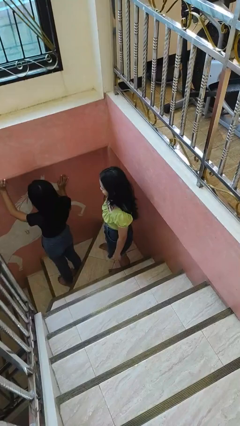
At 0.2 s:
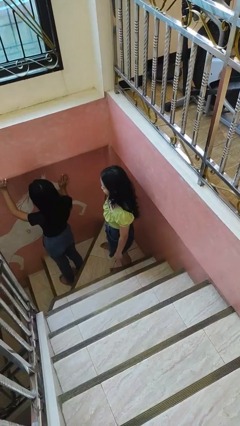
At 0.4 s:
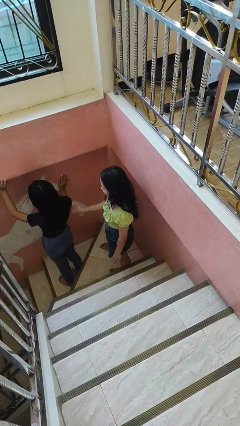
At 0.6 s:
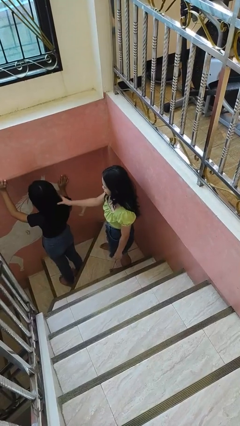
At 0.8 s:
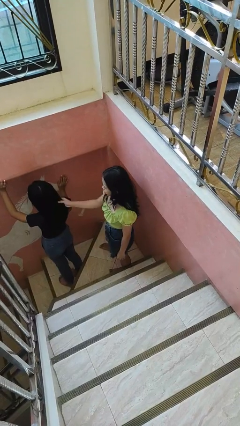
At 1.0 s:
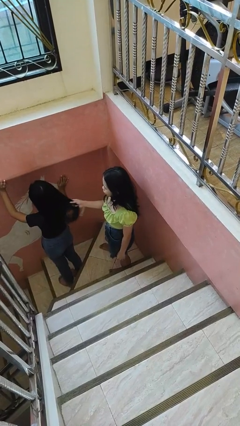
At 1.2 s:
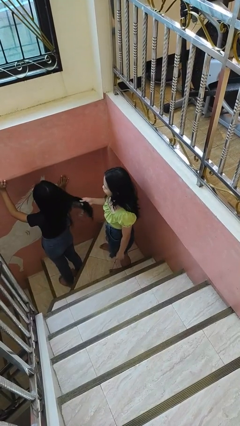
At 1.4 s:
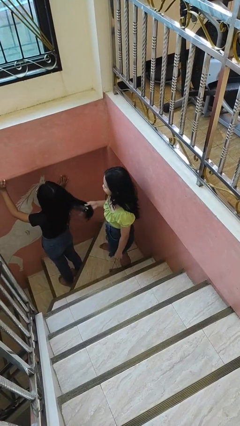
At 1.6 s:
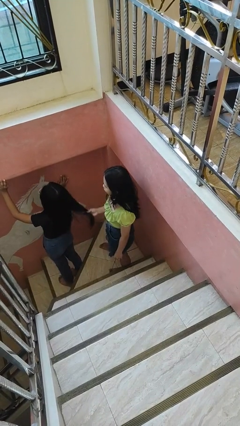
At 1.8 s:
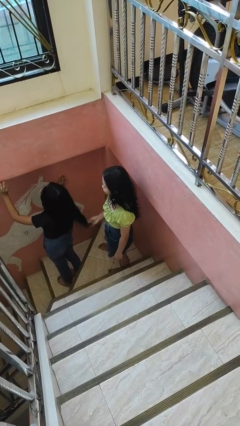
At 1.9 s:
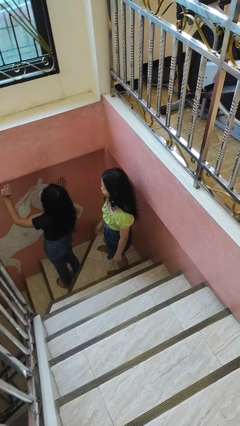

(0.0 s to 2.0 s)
person grabs person by hair

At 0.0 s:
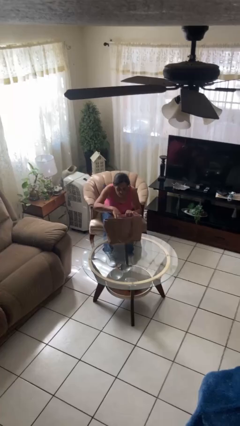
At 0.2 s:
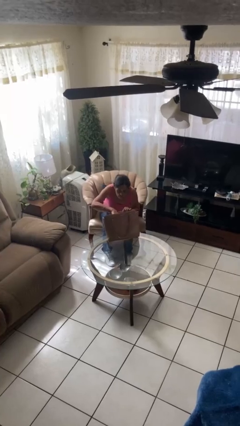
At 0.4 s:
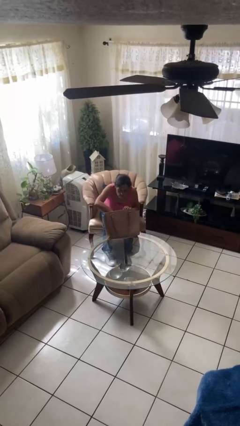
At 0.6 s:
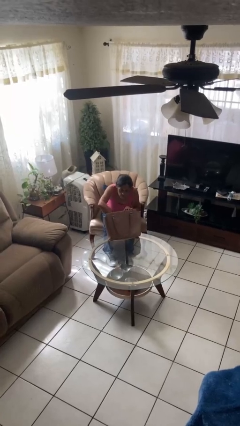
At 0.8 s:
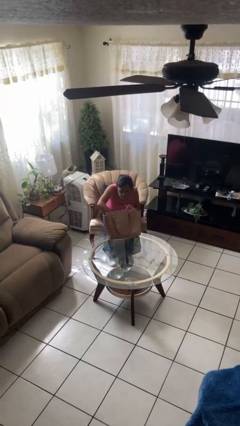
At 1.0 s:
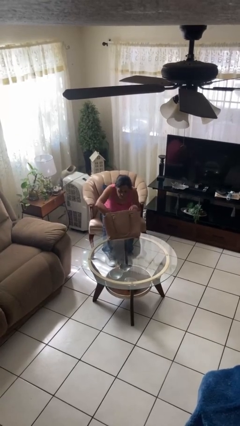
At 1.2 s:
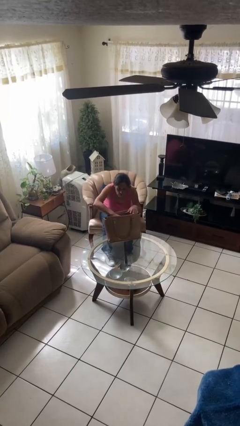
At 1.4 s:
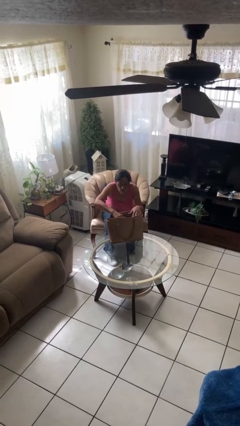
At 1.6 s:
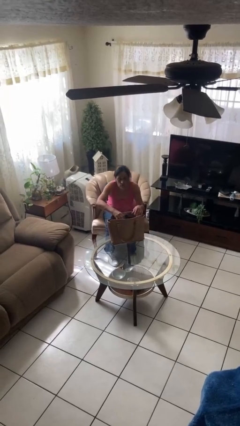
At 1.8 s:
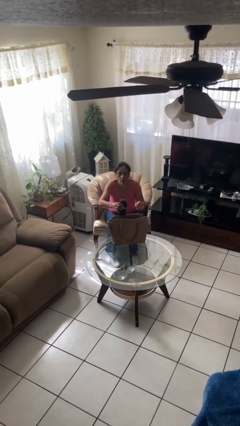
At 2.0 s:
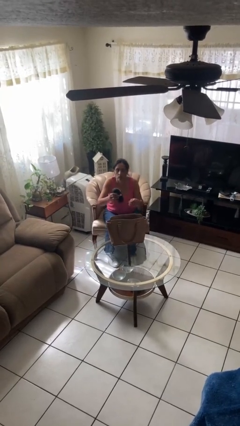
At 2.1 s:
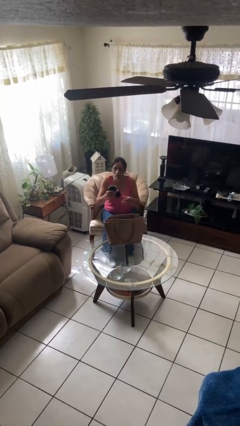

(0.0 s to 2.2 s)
person searches in purse

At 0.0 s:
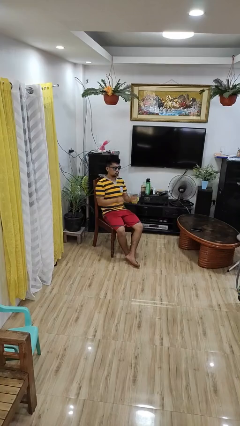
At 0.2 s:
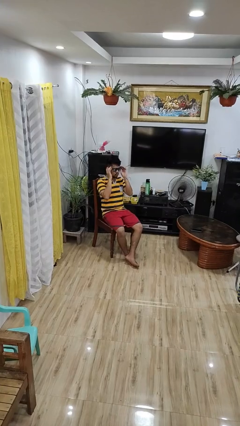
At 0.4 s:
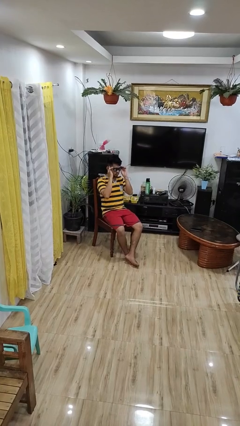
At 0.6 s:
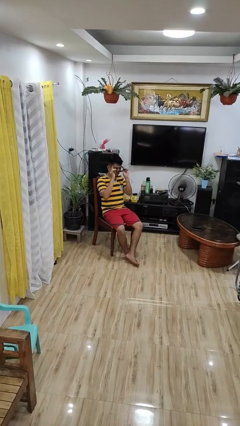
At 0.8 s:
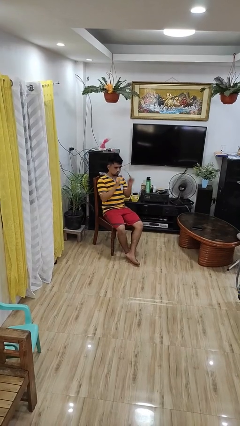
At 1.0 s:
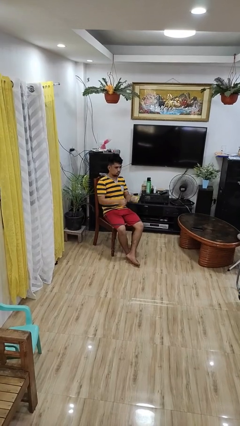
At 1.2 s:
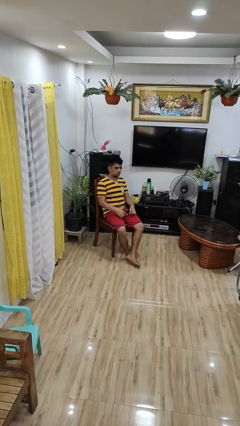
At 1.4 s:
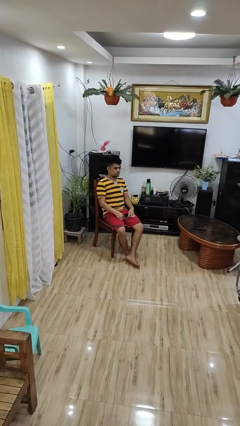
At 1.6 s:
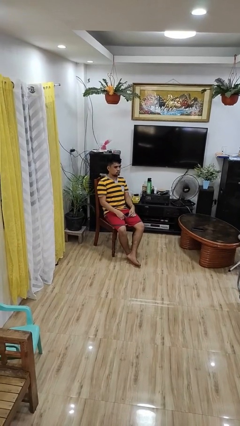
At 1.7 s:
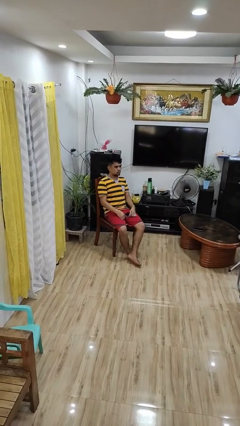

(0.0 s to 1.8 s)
person takes off sunglasses

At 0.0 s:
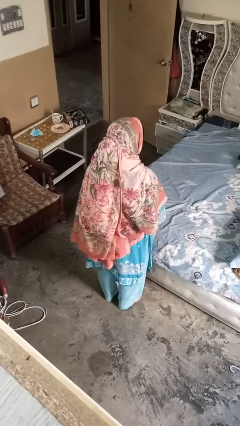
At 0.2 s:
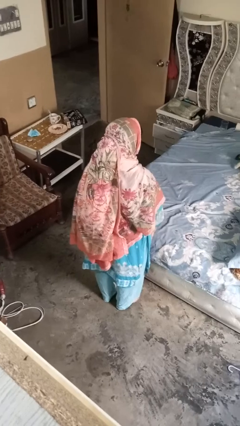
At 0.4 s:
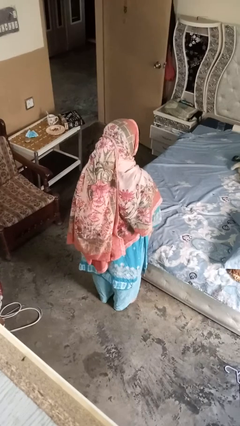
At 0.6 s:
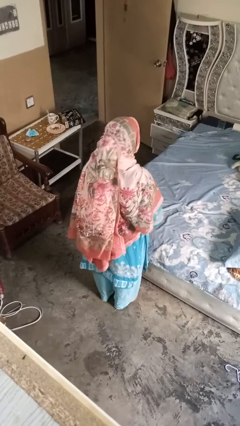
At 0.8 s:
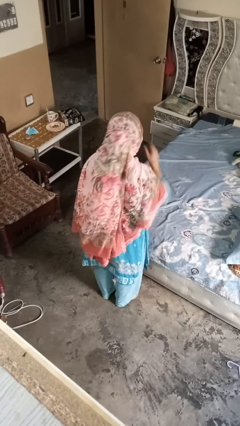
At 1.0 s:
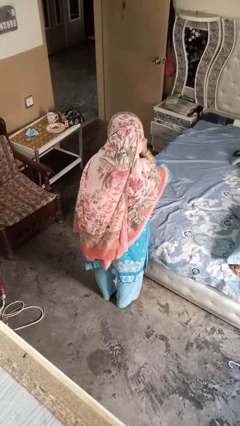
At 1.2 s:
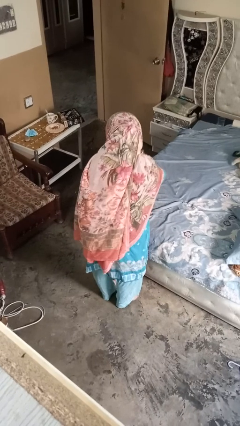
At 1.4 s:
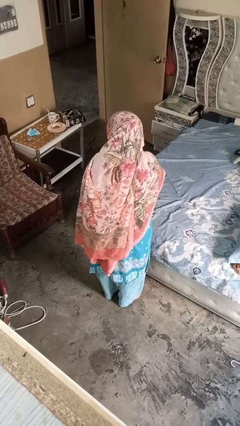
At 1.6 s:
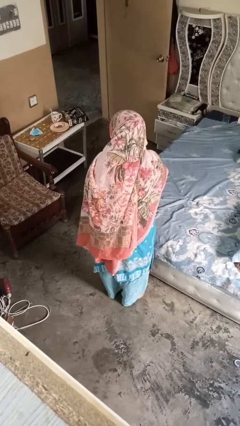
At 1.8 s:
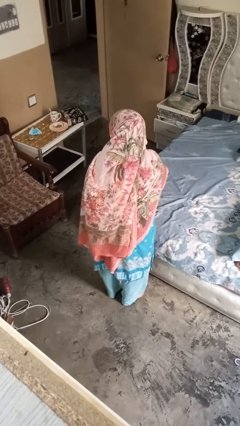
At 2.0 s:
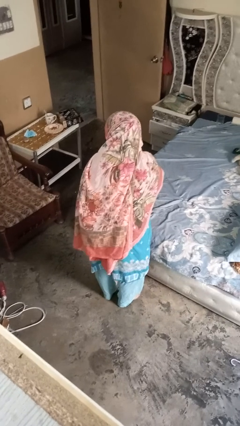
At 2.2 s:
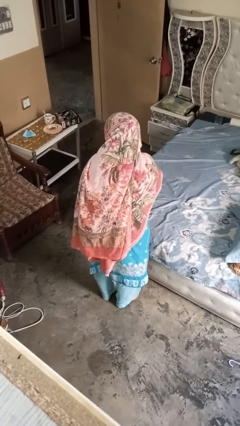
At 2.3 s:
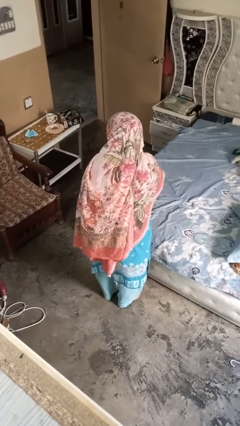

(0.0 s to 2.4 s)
person gestures listen closely

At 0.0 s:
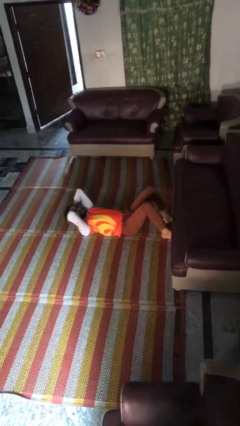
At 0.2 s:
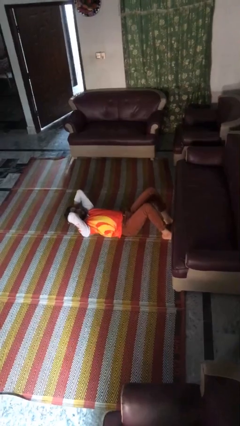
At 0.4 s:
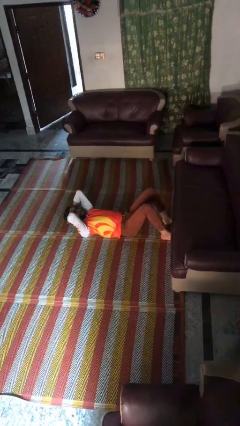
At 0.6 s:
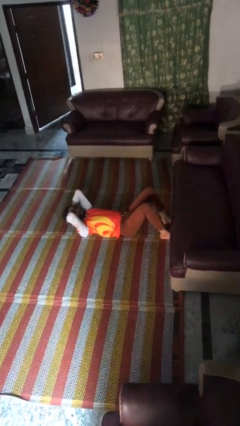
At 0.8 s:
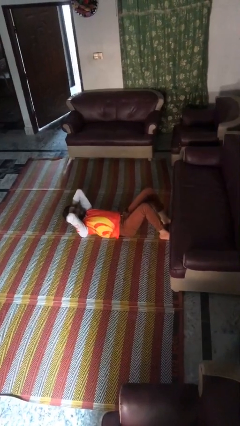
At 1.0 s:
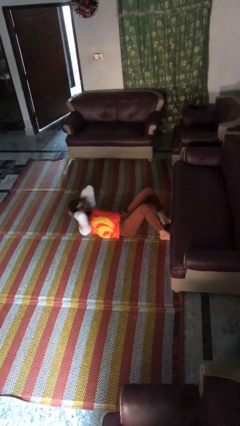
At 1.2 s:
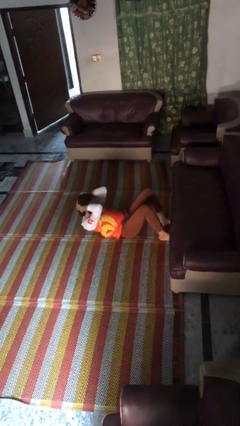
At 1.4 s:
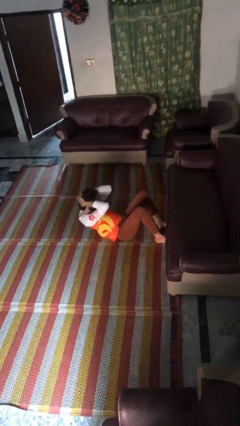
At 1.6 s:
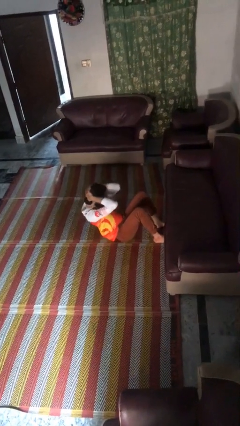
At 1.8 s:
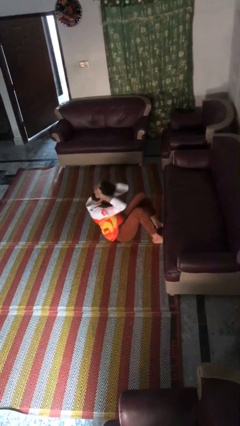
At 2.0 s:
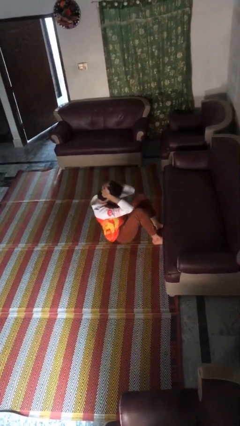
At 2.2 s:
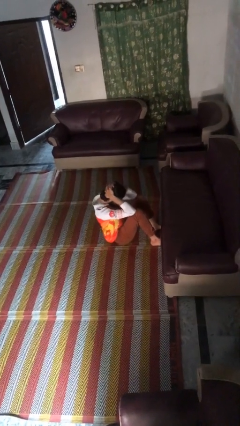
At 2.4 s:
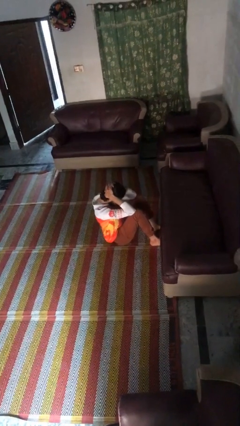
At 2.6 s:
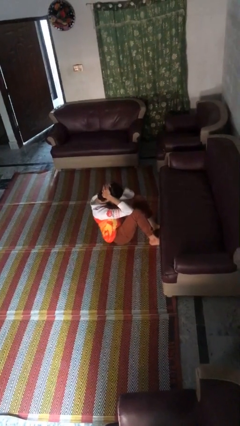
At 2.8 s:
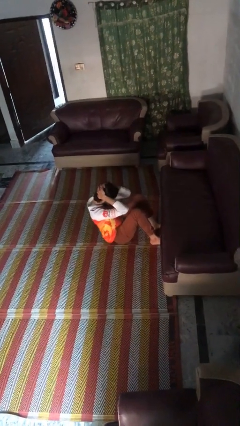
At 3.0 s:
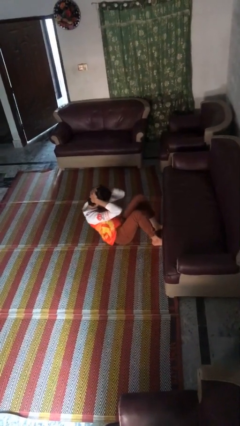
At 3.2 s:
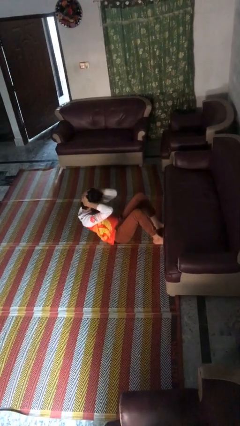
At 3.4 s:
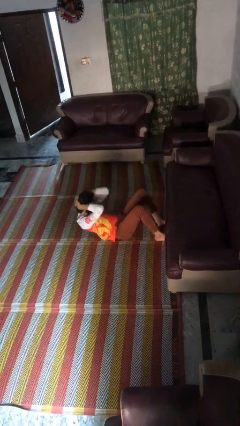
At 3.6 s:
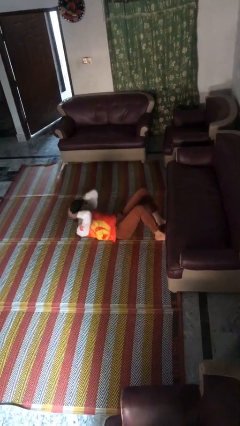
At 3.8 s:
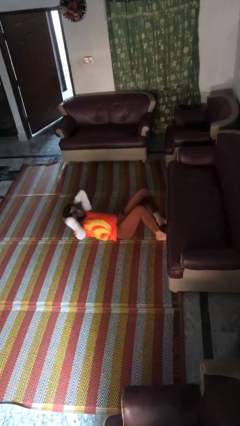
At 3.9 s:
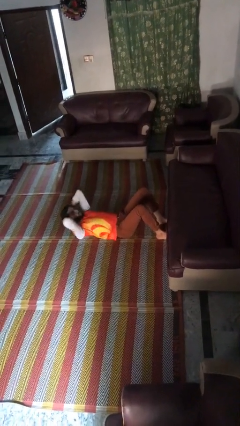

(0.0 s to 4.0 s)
person exercises with situp

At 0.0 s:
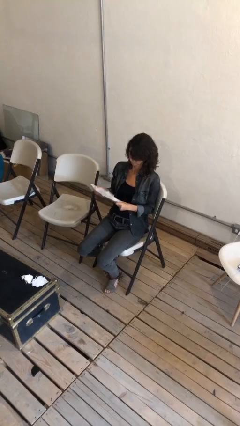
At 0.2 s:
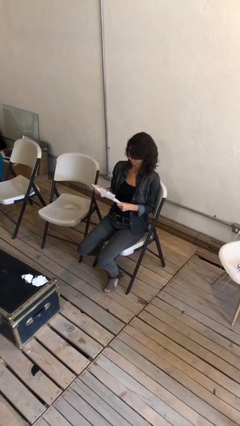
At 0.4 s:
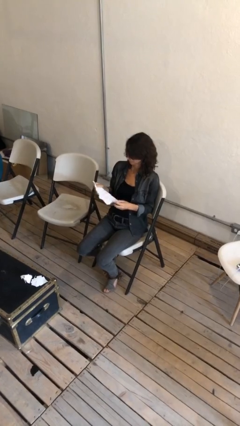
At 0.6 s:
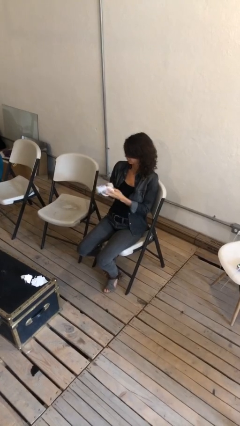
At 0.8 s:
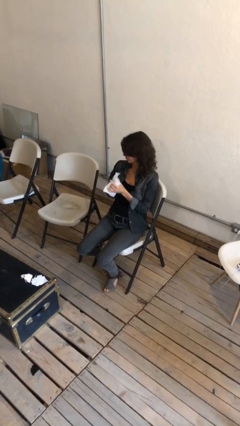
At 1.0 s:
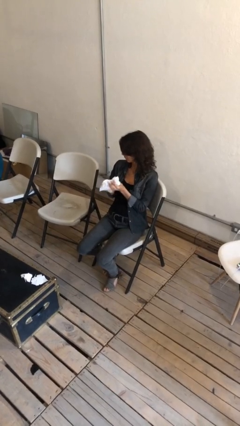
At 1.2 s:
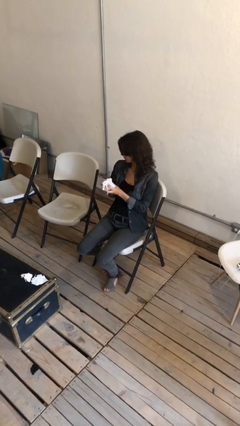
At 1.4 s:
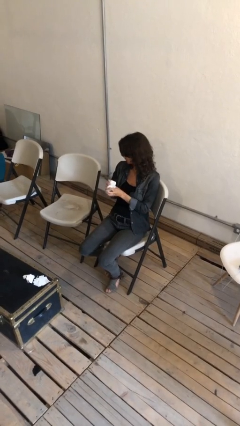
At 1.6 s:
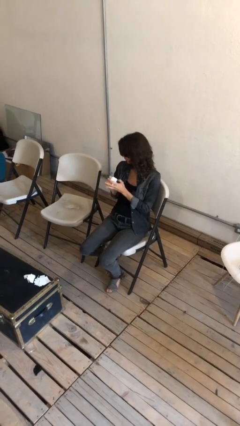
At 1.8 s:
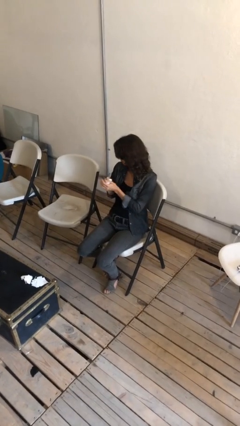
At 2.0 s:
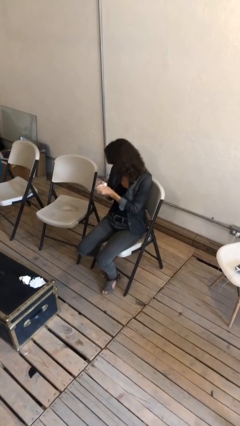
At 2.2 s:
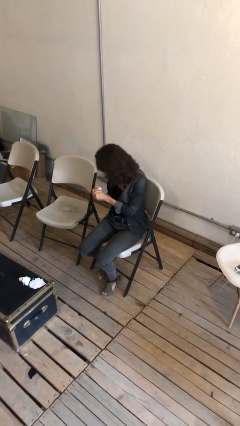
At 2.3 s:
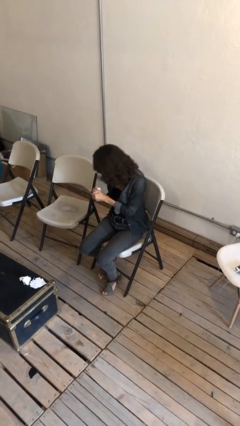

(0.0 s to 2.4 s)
person crumples paper

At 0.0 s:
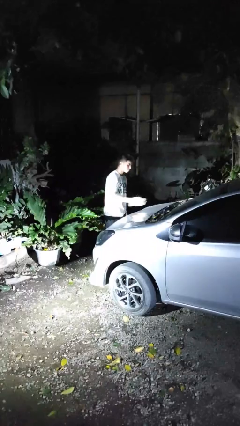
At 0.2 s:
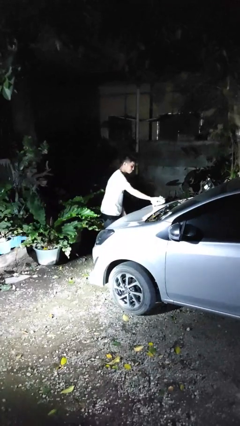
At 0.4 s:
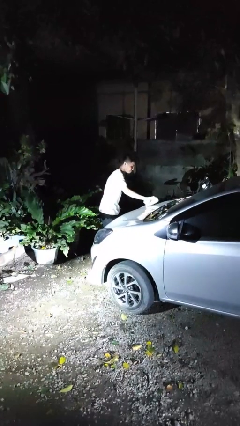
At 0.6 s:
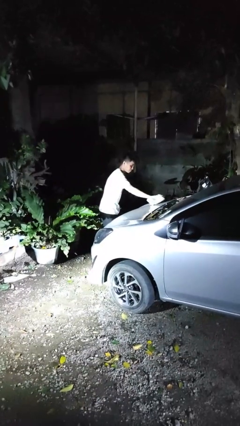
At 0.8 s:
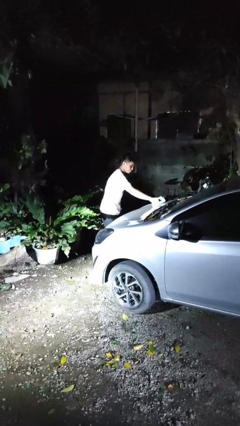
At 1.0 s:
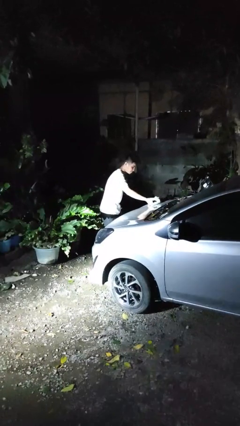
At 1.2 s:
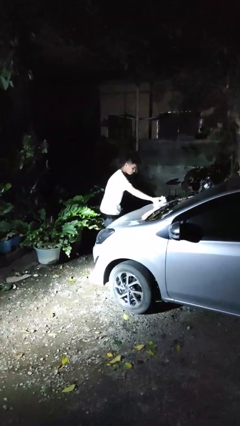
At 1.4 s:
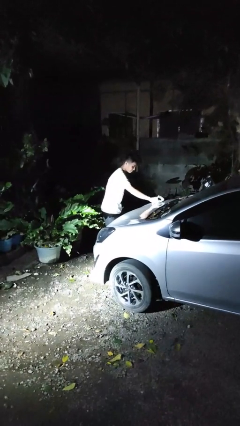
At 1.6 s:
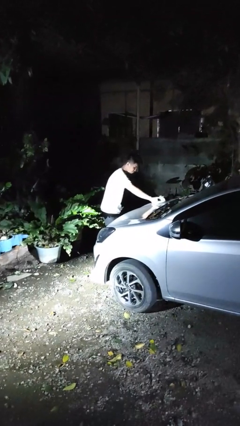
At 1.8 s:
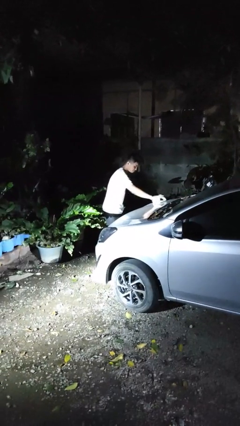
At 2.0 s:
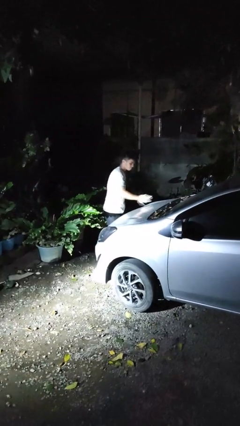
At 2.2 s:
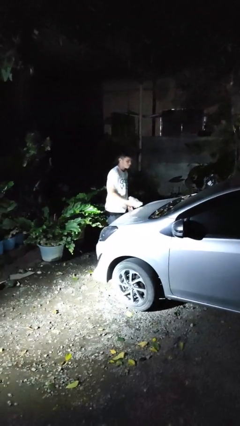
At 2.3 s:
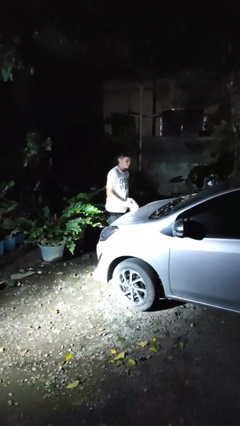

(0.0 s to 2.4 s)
person polishes car with rag
